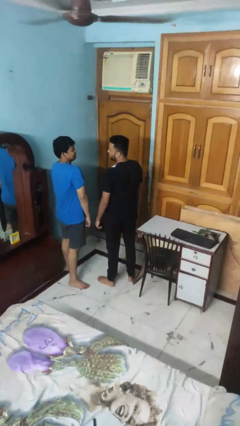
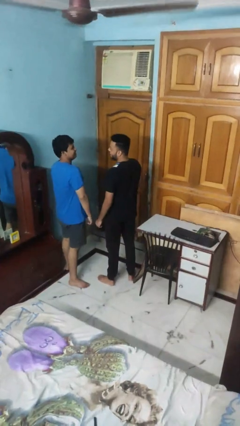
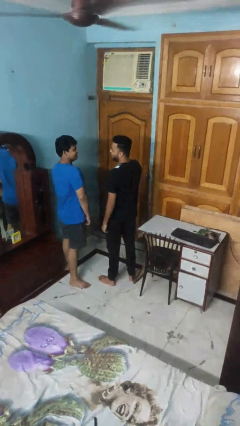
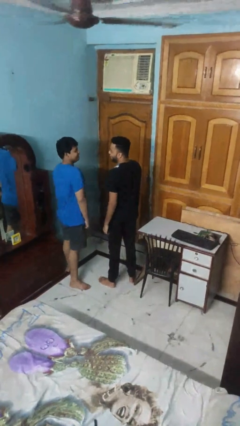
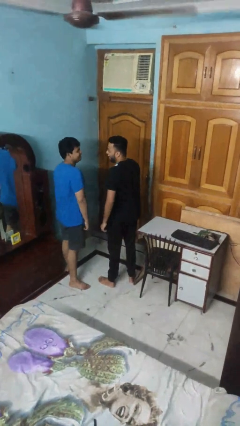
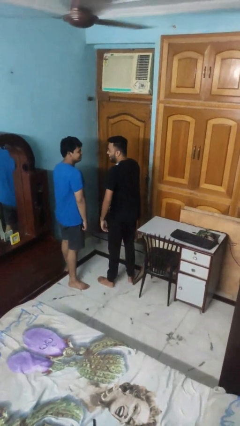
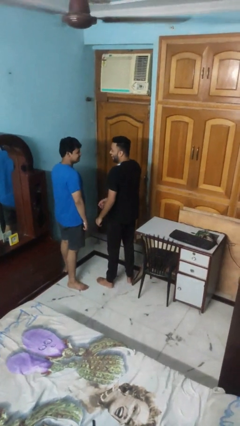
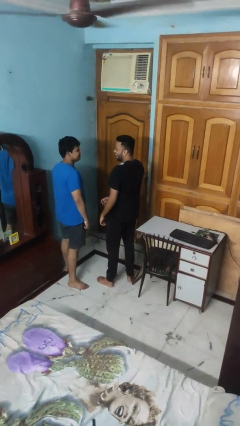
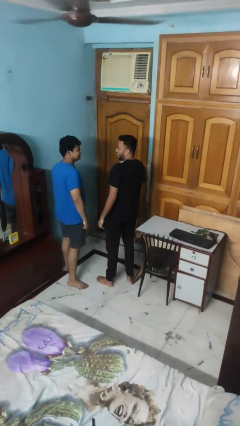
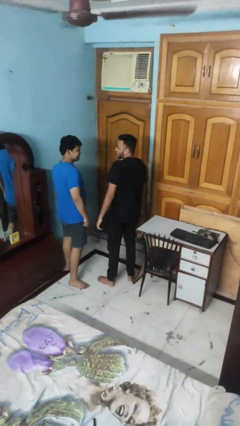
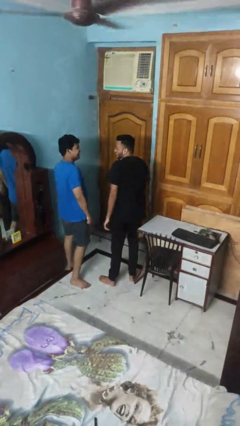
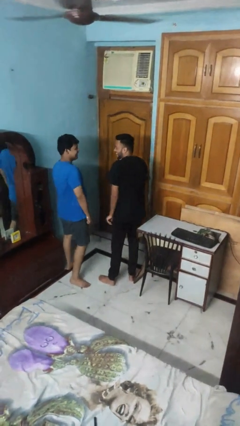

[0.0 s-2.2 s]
person laughs with person

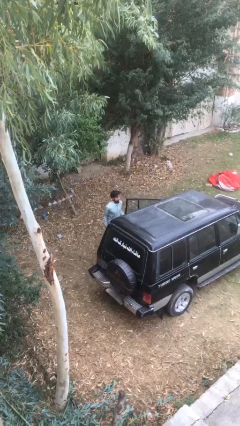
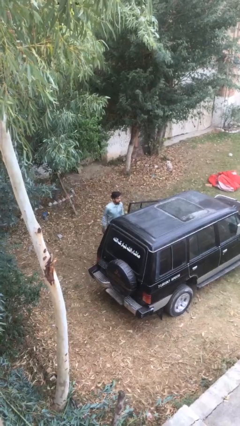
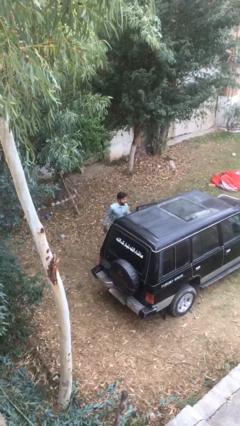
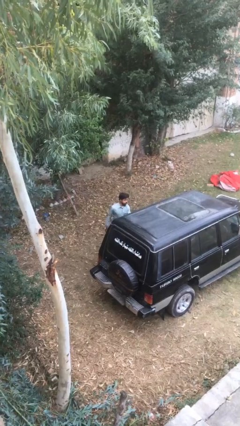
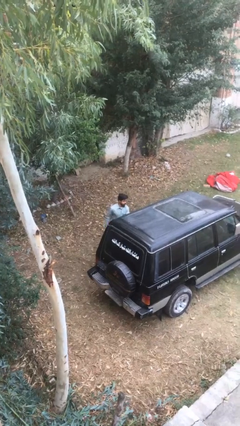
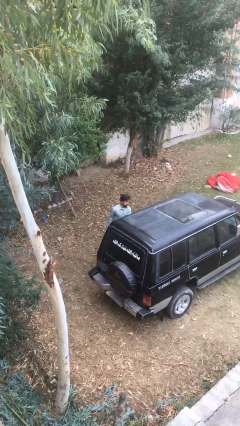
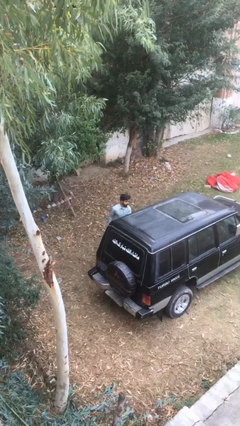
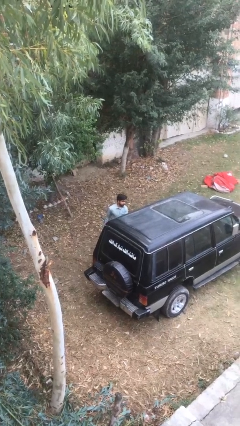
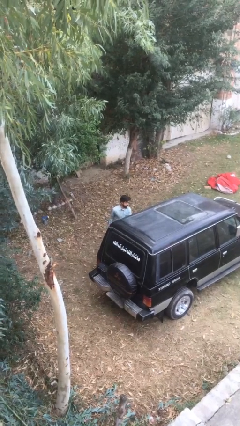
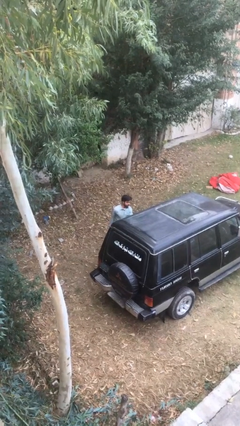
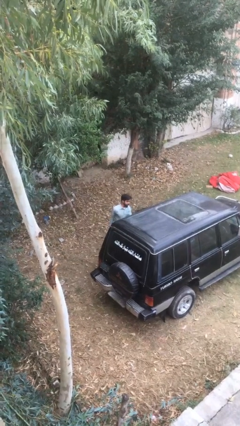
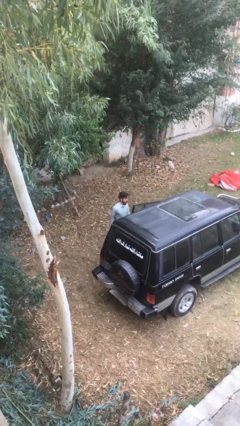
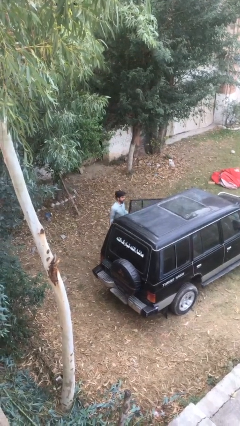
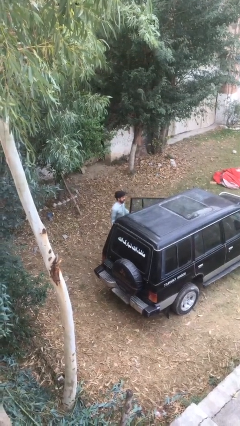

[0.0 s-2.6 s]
person closes car door

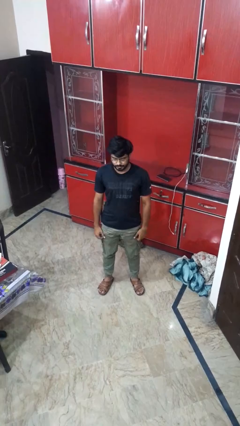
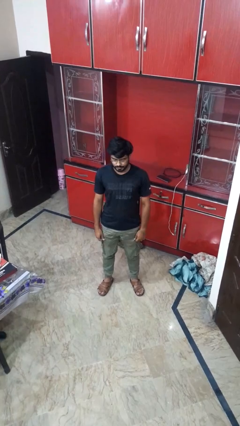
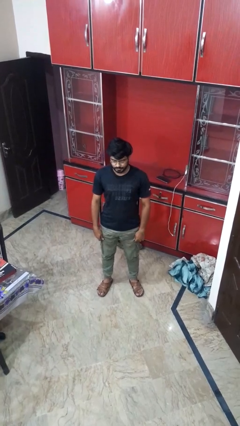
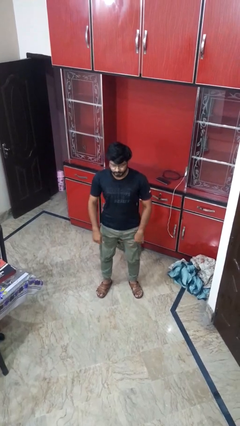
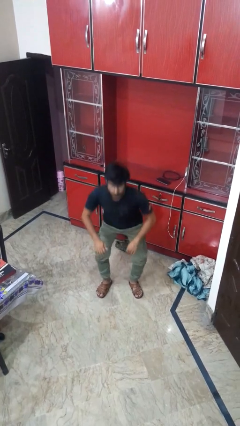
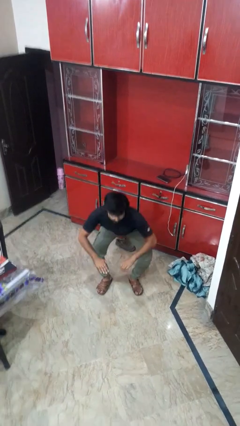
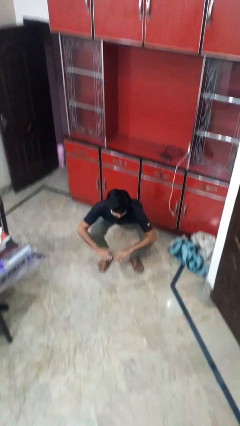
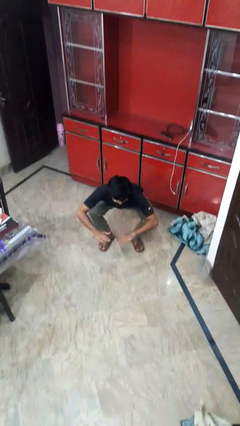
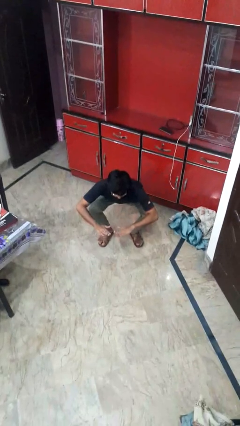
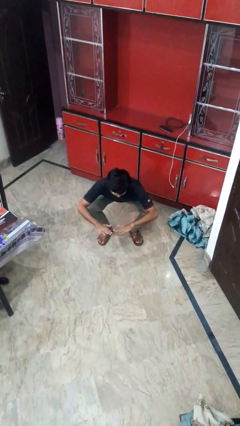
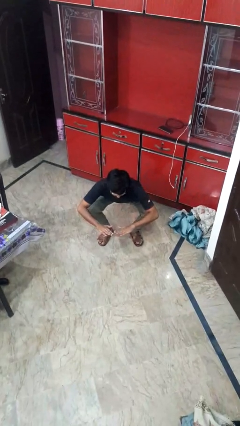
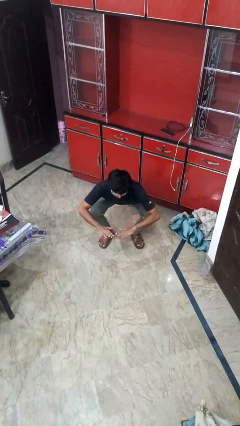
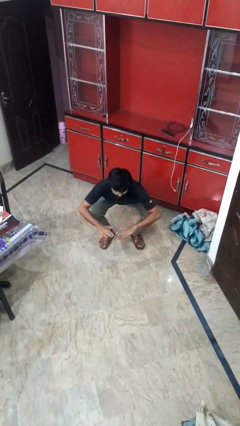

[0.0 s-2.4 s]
person squats

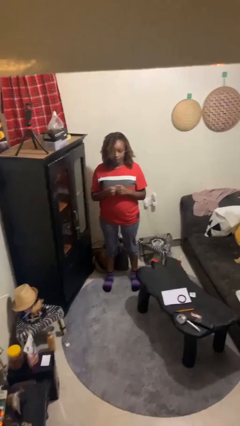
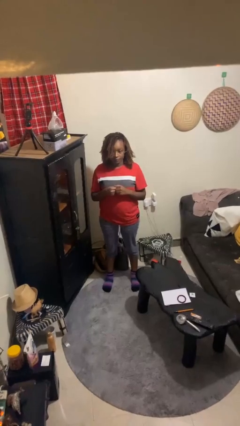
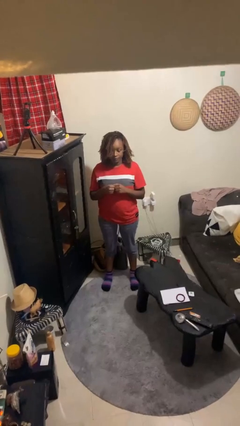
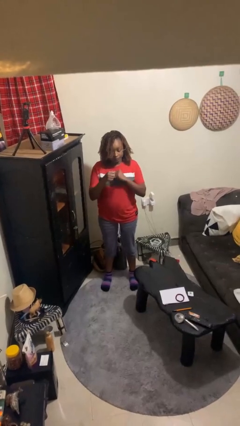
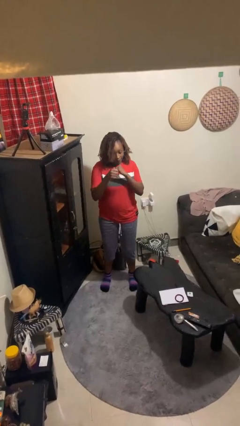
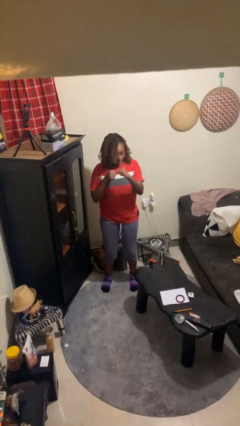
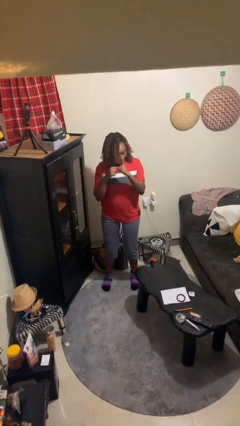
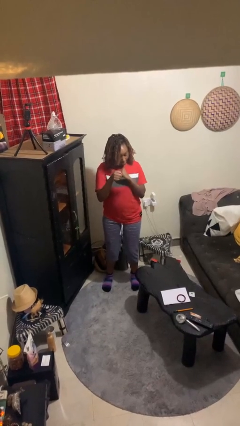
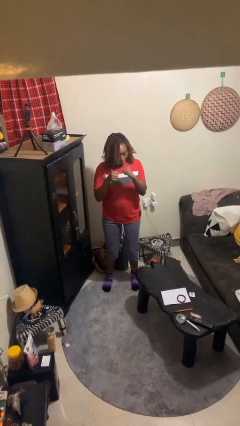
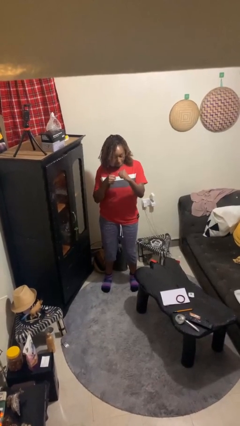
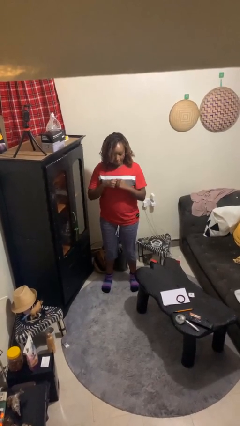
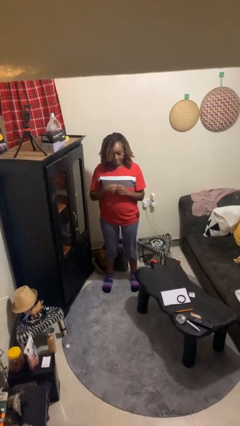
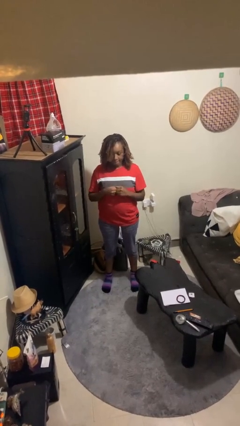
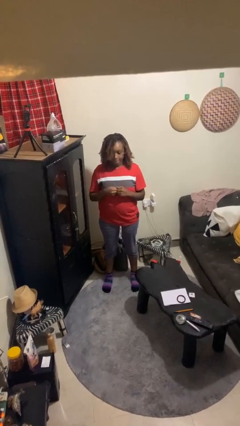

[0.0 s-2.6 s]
person punches

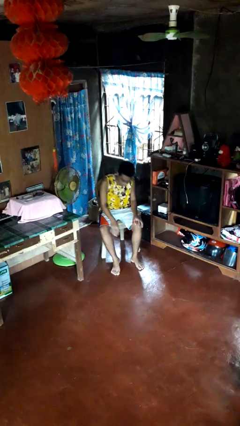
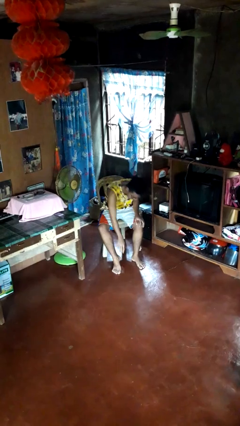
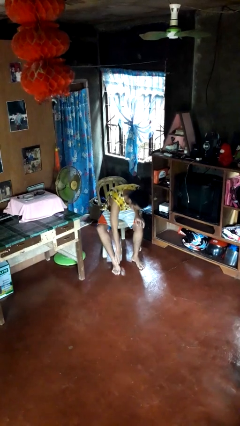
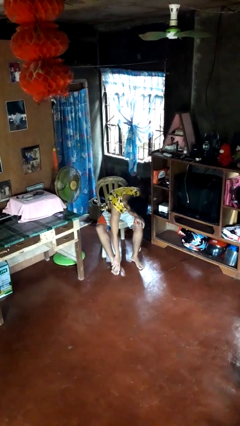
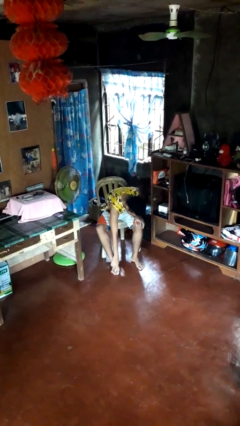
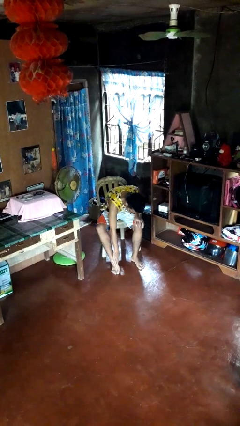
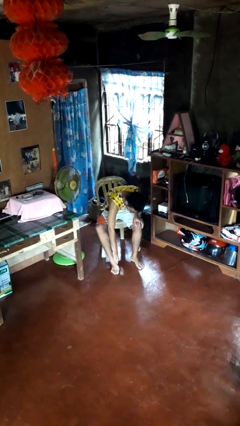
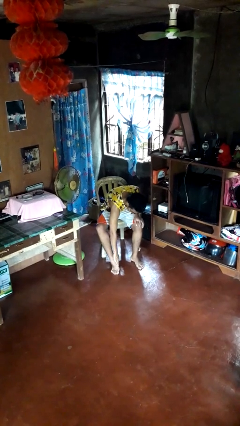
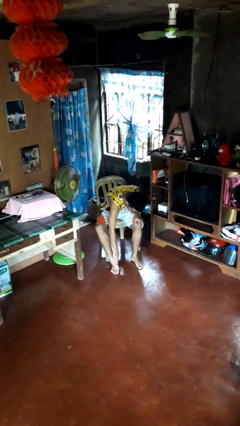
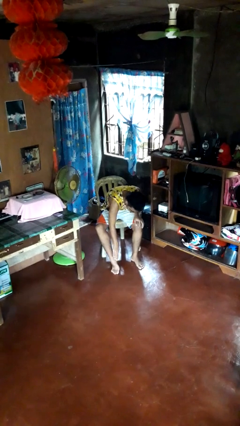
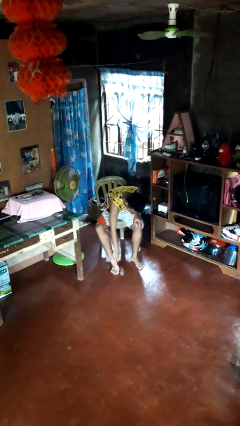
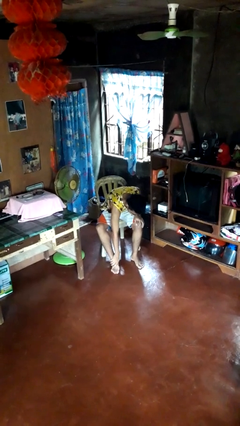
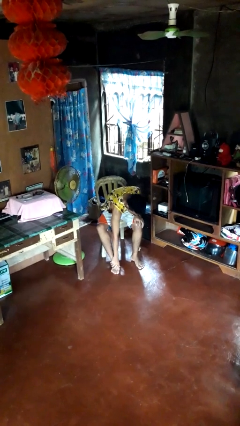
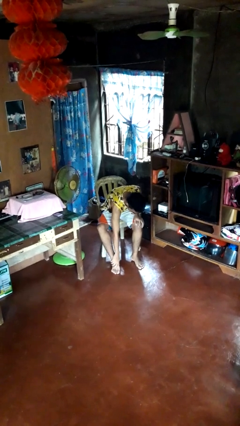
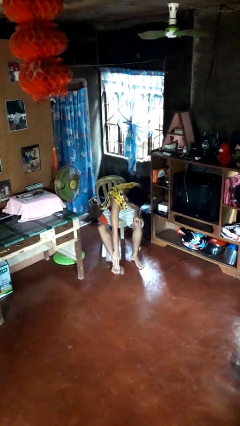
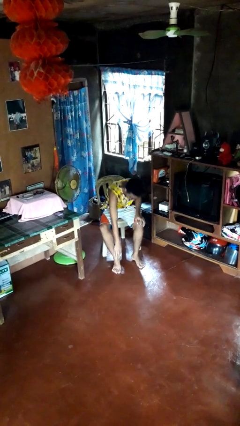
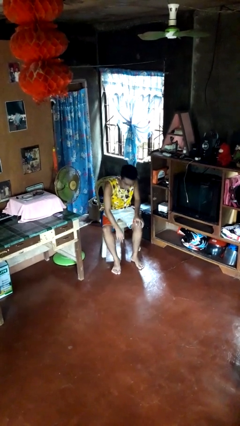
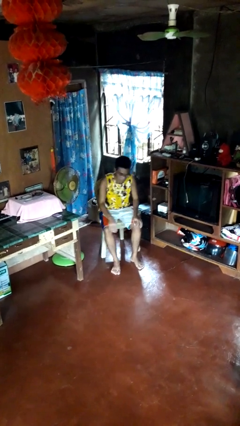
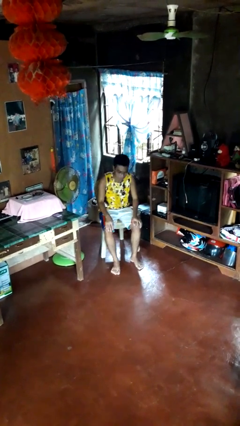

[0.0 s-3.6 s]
person rubs foot

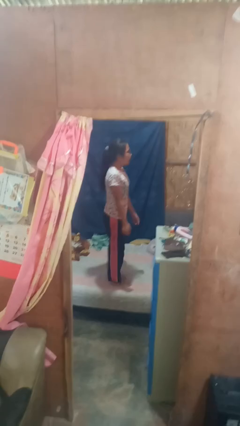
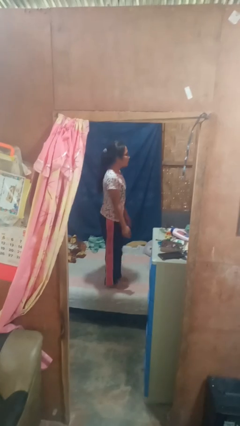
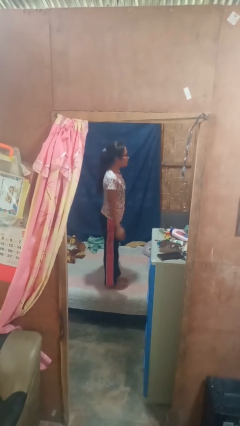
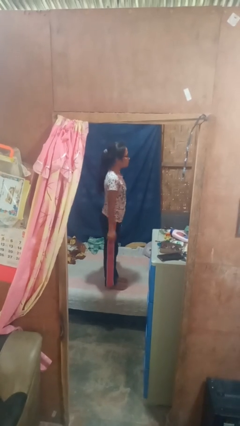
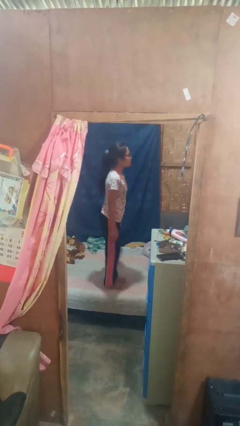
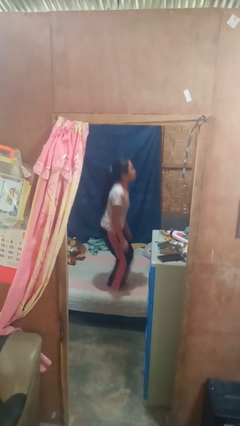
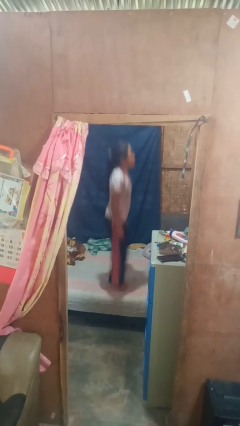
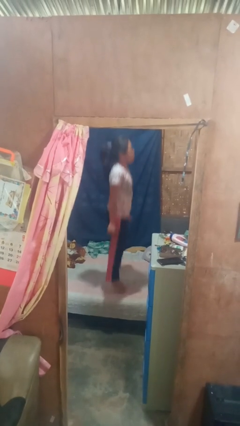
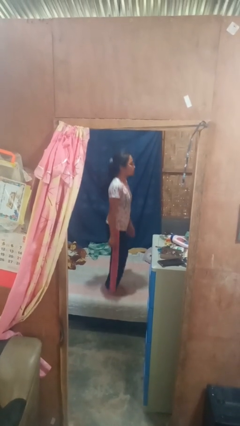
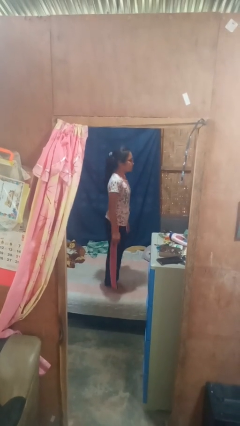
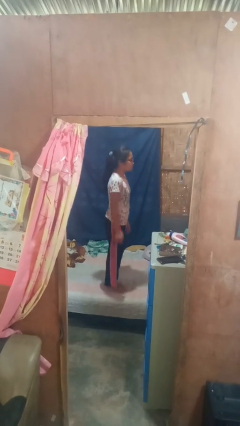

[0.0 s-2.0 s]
person jumps on bed

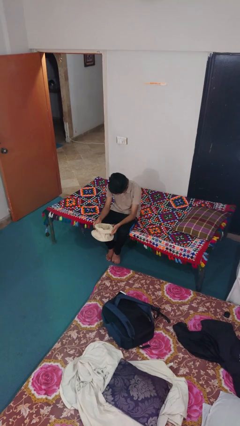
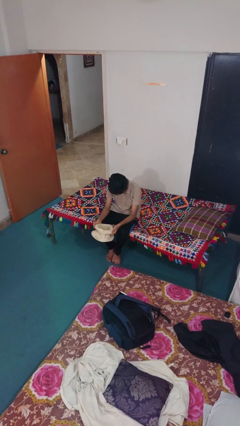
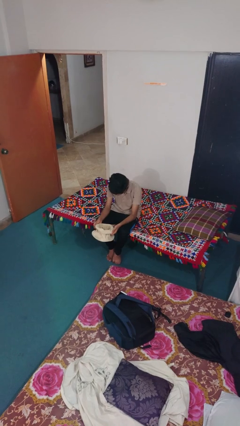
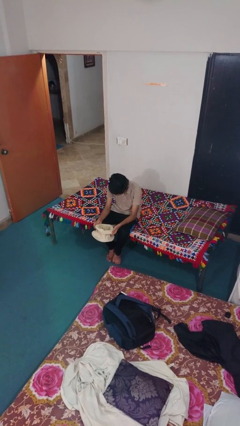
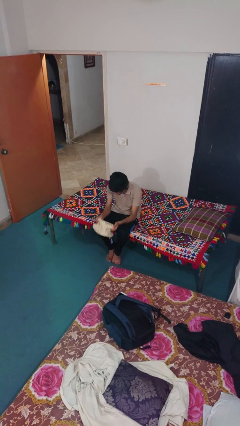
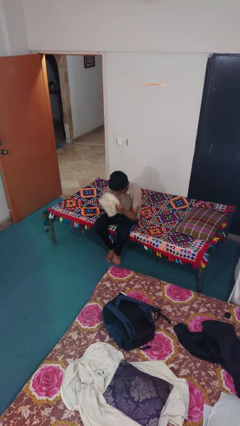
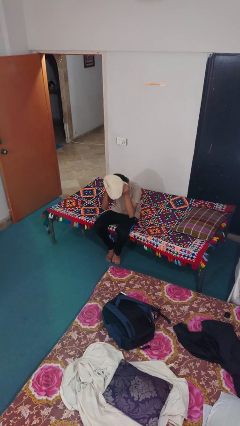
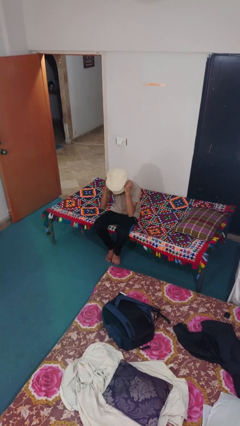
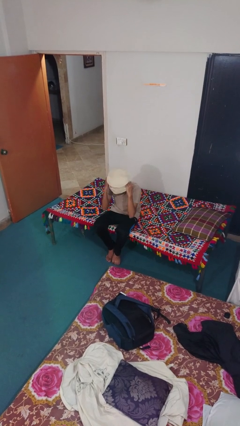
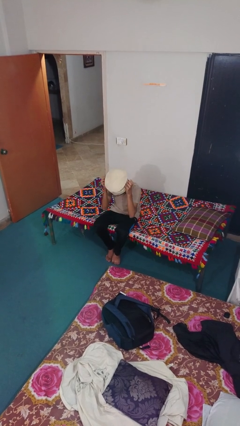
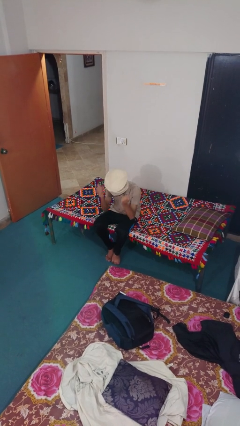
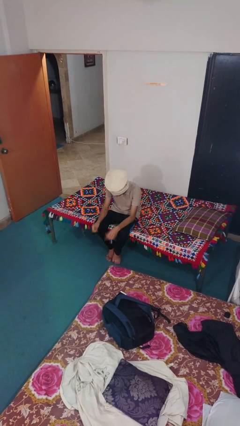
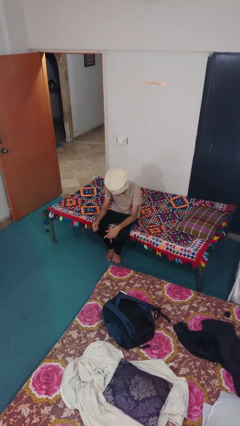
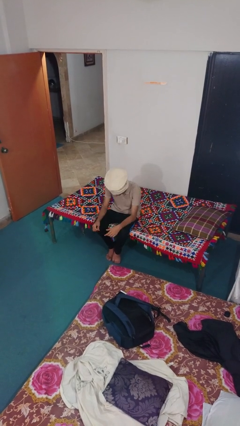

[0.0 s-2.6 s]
person puts on hat
